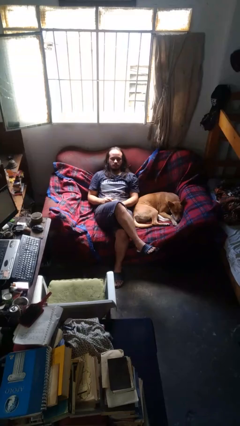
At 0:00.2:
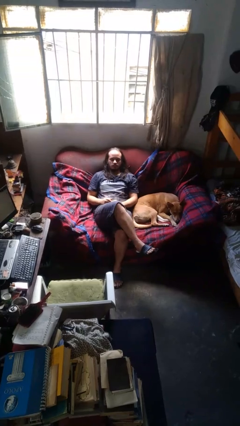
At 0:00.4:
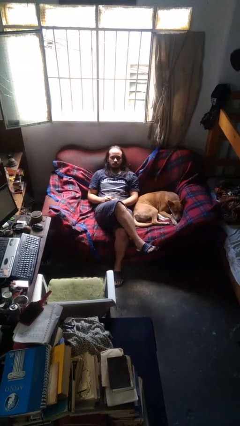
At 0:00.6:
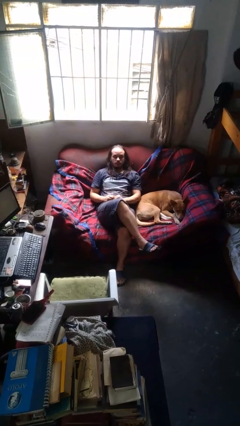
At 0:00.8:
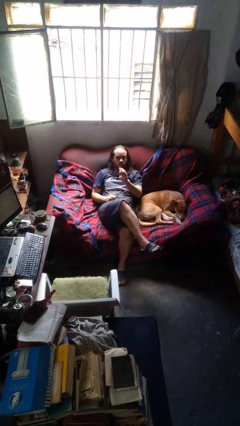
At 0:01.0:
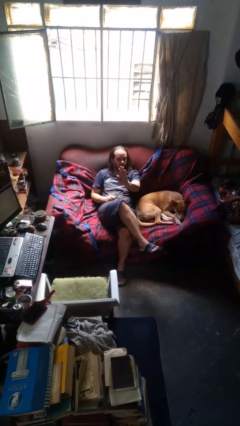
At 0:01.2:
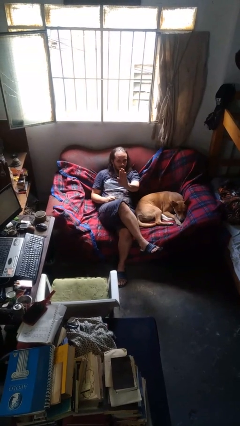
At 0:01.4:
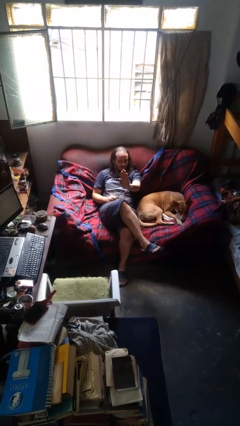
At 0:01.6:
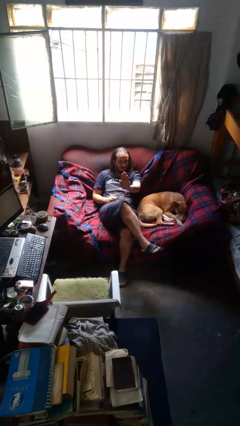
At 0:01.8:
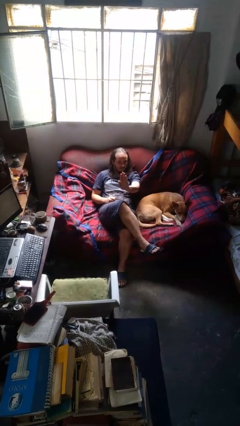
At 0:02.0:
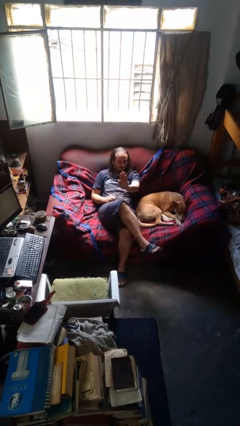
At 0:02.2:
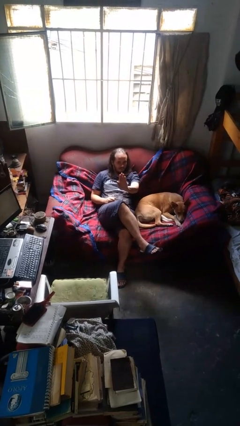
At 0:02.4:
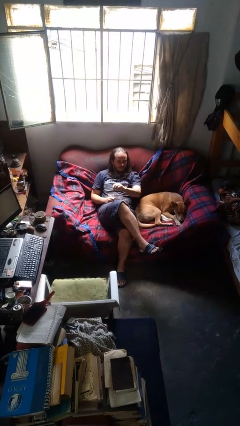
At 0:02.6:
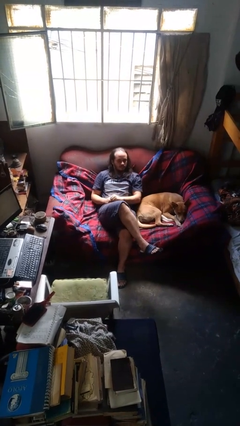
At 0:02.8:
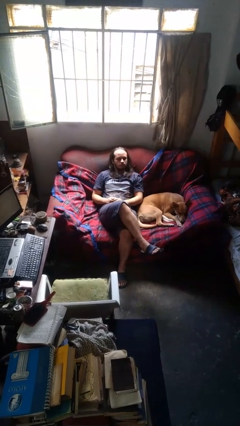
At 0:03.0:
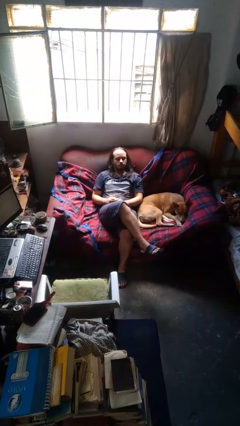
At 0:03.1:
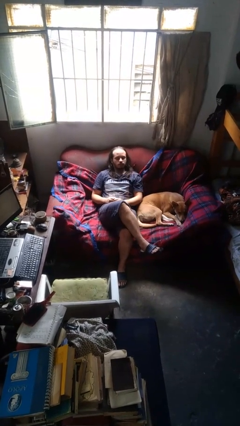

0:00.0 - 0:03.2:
person gestures stop

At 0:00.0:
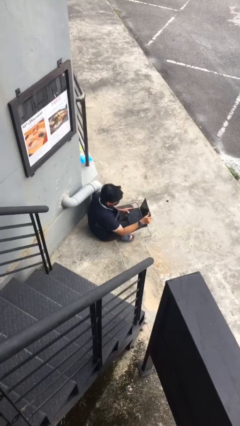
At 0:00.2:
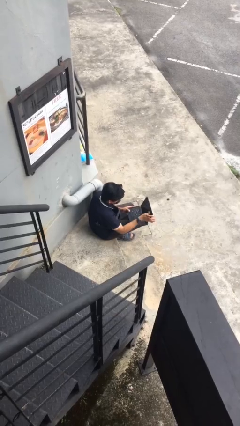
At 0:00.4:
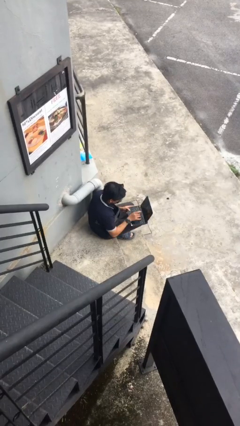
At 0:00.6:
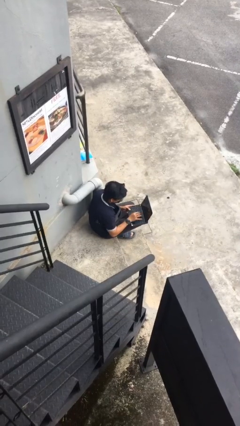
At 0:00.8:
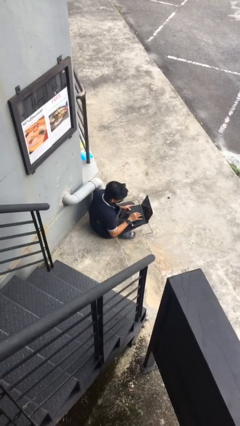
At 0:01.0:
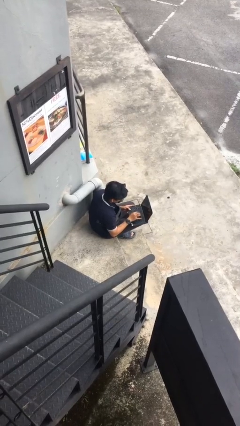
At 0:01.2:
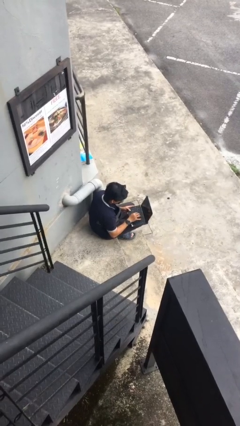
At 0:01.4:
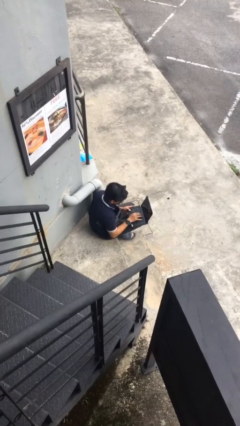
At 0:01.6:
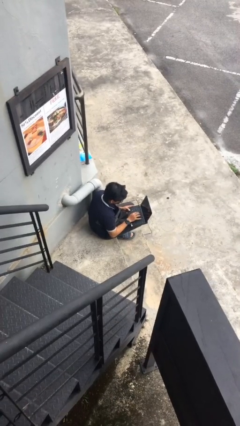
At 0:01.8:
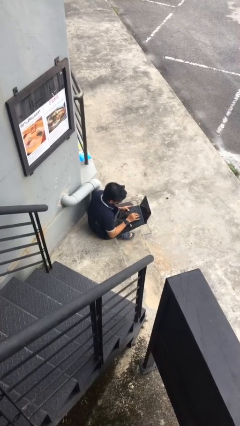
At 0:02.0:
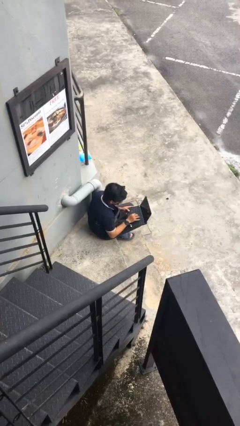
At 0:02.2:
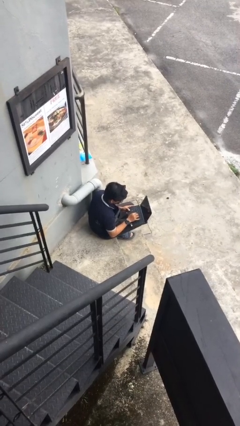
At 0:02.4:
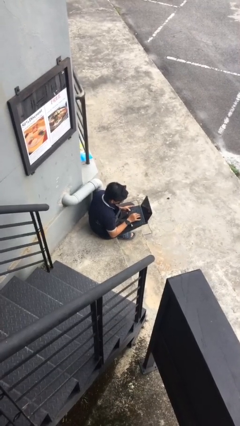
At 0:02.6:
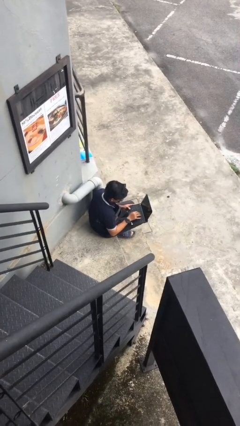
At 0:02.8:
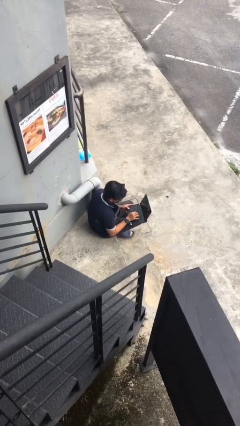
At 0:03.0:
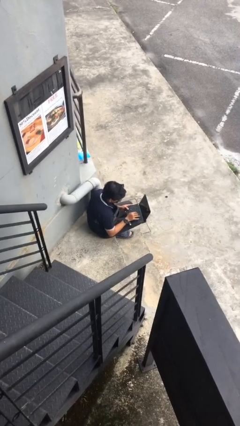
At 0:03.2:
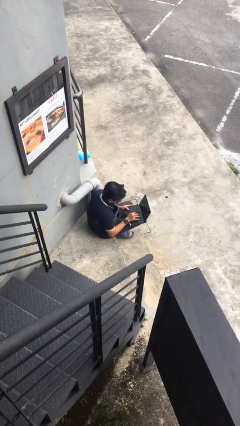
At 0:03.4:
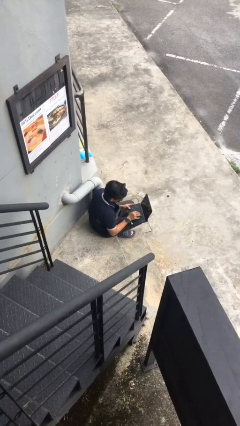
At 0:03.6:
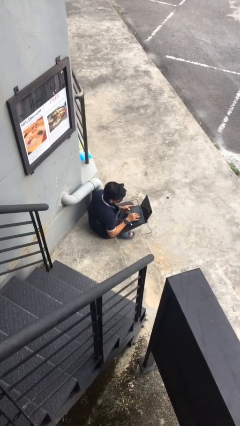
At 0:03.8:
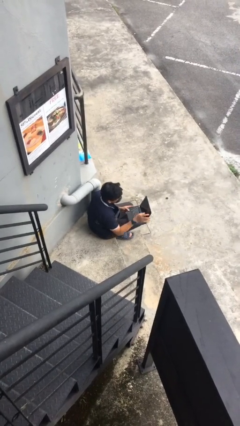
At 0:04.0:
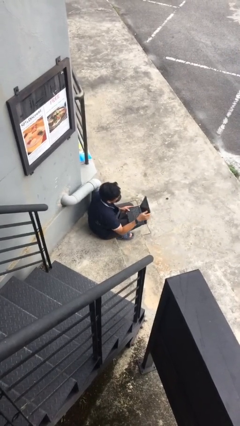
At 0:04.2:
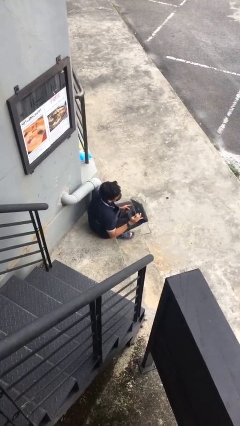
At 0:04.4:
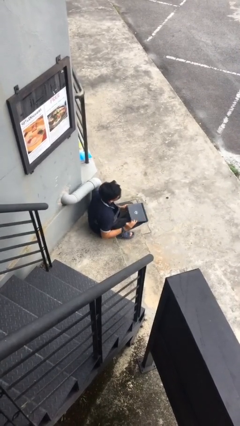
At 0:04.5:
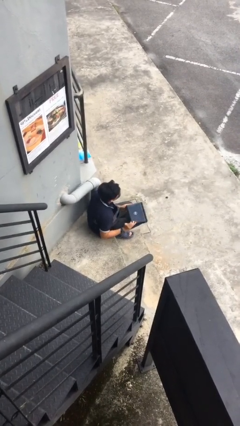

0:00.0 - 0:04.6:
person interacts with laptop

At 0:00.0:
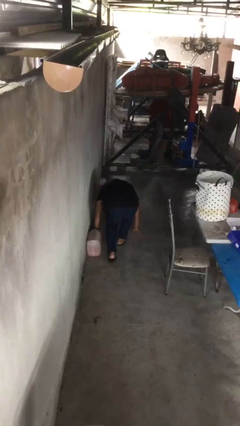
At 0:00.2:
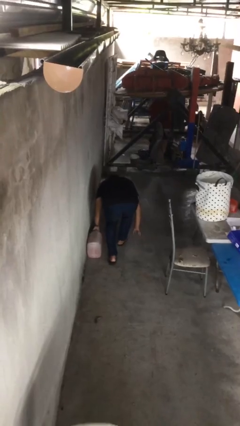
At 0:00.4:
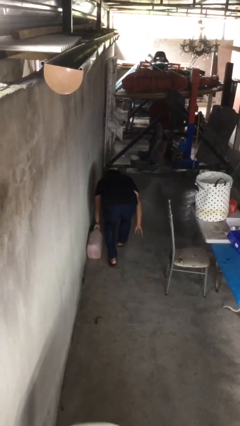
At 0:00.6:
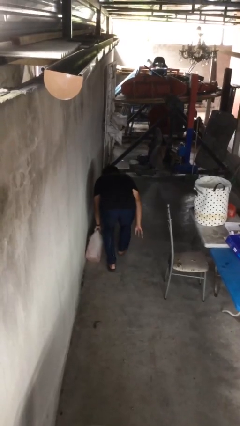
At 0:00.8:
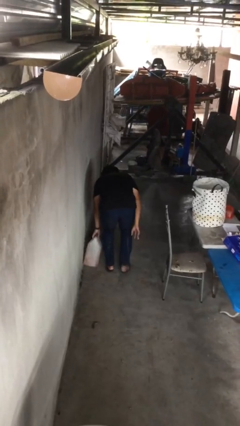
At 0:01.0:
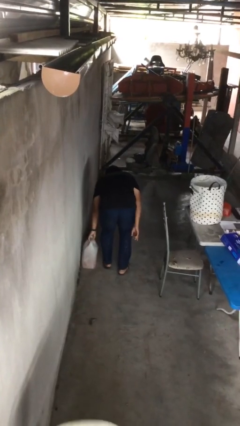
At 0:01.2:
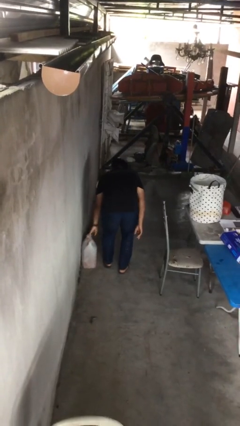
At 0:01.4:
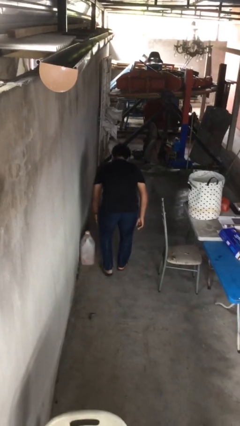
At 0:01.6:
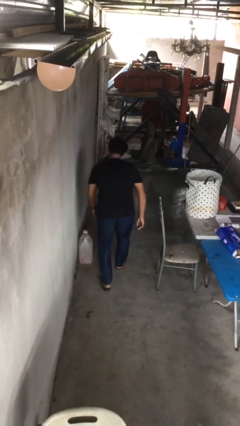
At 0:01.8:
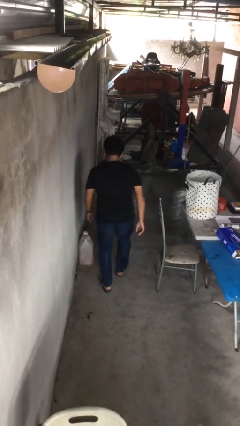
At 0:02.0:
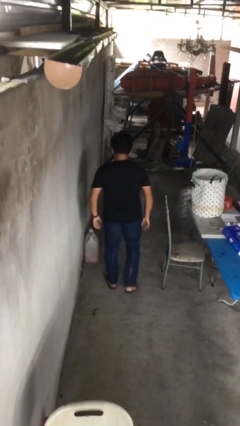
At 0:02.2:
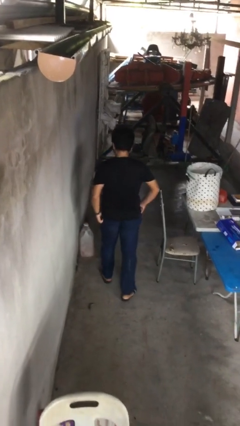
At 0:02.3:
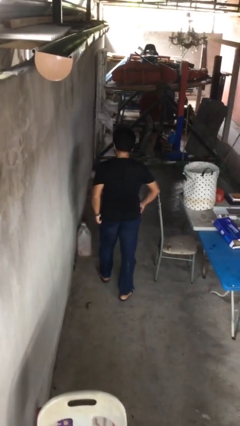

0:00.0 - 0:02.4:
person stands up from floor

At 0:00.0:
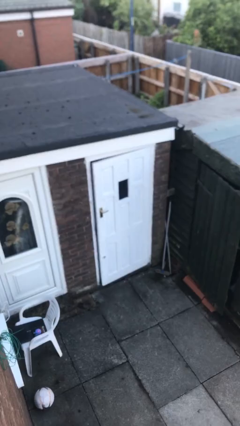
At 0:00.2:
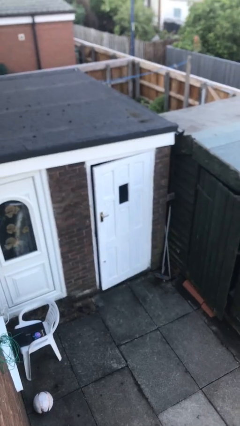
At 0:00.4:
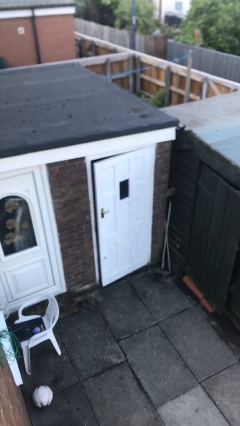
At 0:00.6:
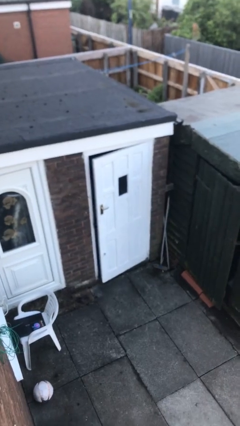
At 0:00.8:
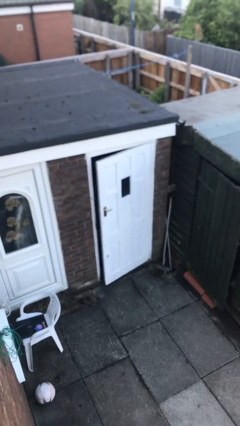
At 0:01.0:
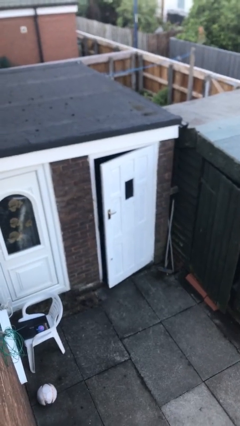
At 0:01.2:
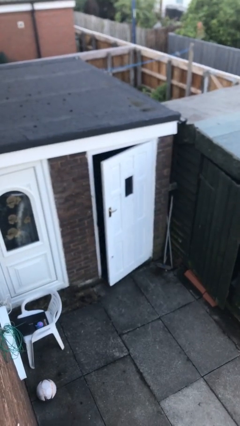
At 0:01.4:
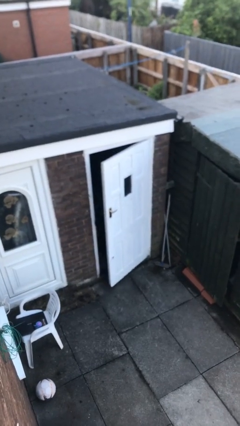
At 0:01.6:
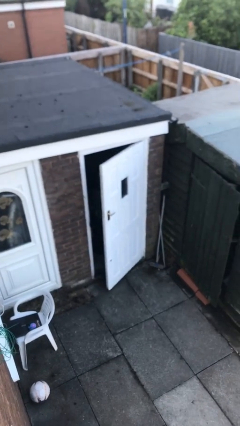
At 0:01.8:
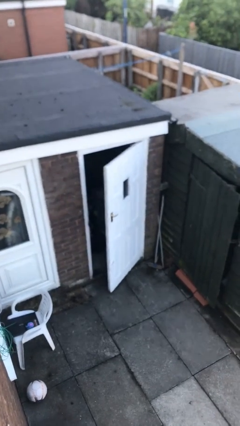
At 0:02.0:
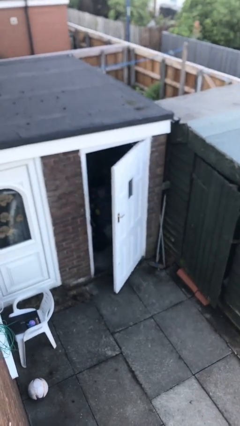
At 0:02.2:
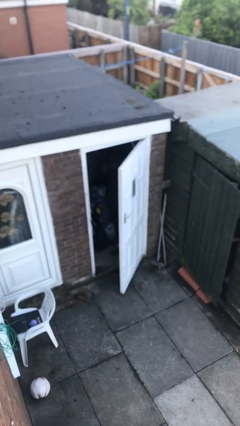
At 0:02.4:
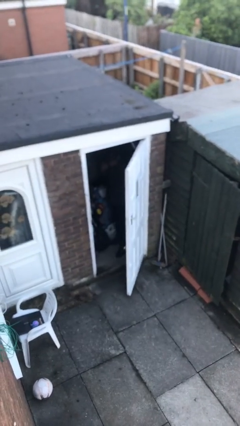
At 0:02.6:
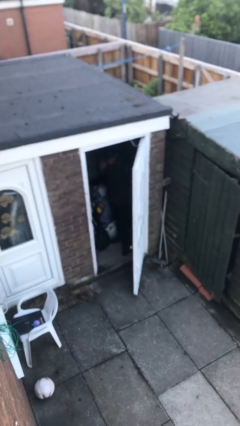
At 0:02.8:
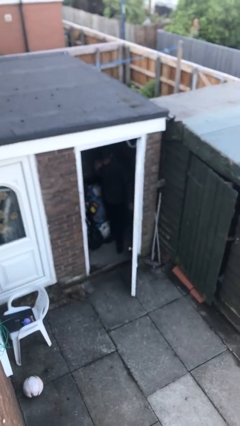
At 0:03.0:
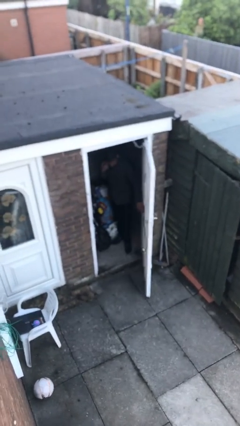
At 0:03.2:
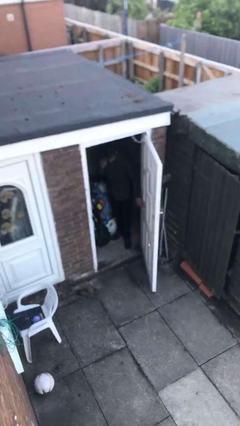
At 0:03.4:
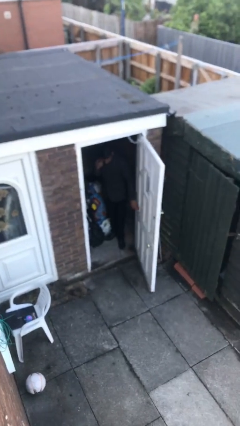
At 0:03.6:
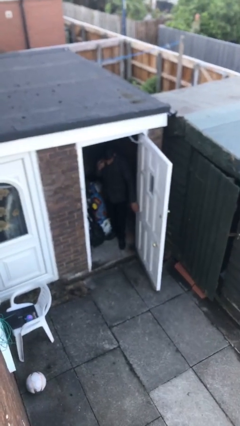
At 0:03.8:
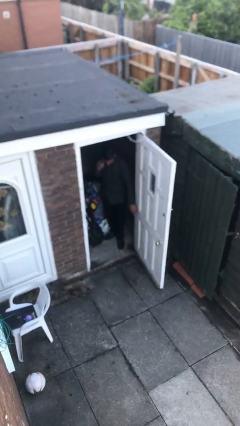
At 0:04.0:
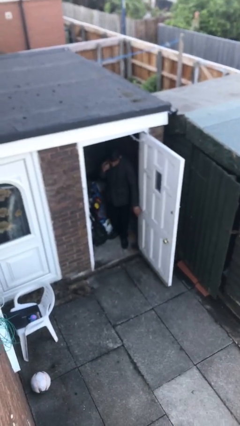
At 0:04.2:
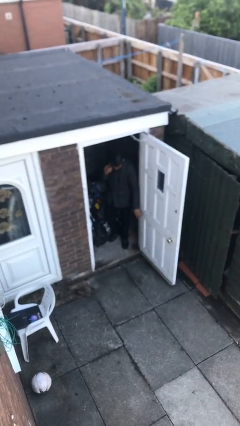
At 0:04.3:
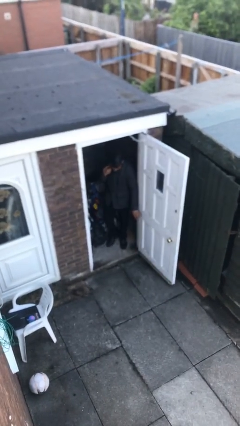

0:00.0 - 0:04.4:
person opens facility door

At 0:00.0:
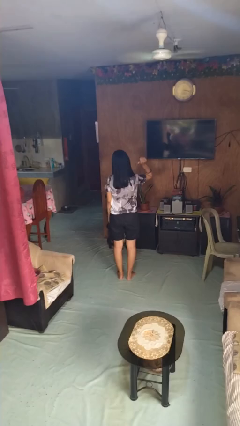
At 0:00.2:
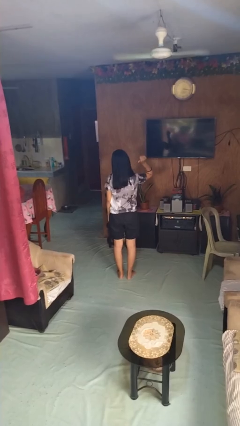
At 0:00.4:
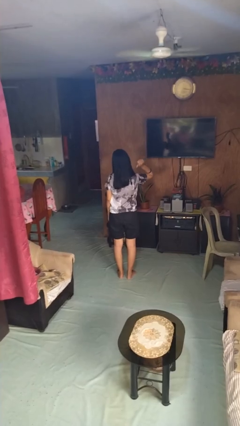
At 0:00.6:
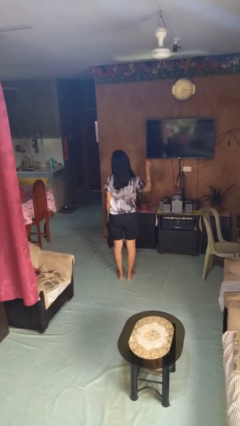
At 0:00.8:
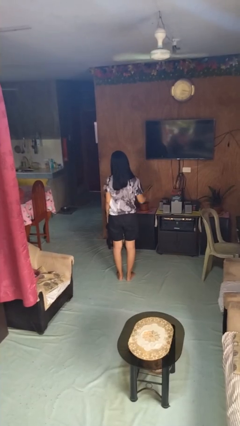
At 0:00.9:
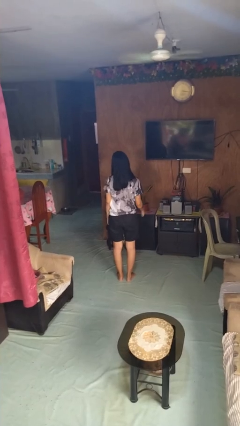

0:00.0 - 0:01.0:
person gestures behind me

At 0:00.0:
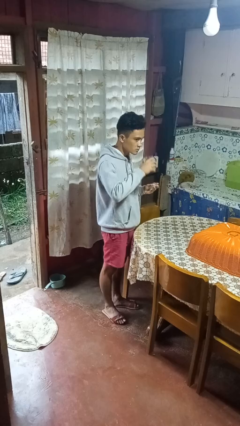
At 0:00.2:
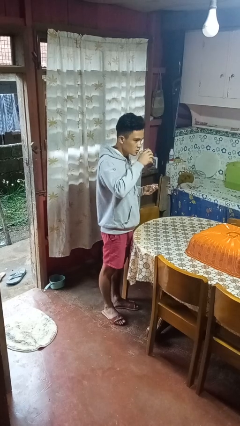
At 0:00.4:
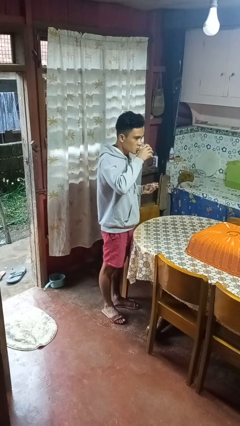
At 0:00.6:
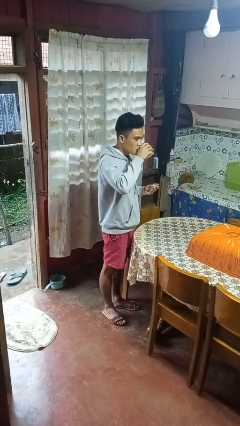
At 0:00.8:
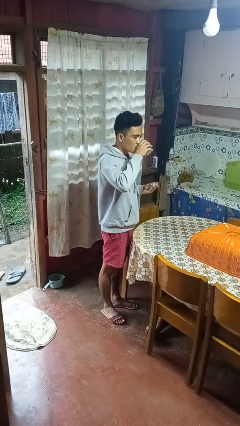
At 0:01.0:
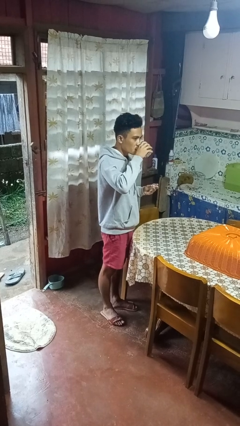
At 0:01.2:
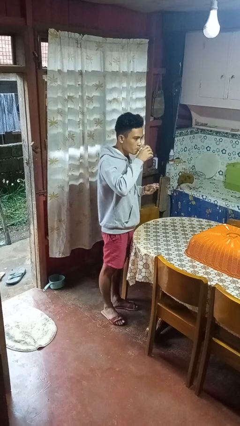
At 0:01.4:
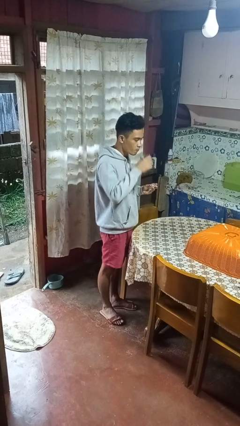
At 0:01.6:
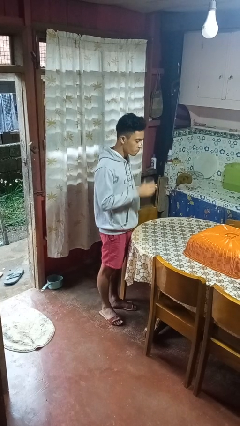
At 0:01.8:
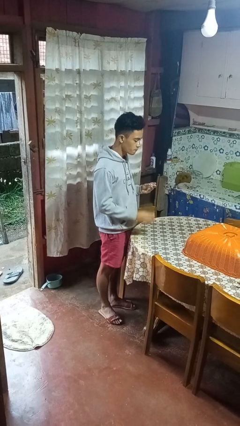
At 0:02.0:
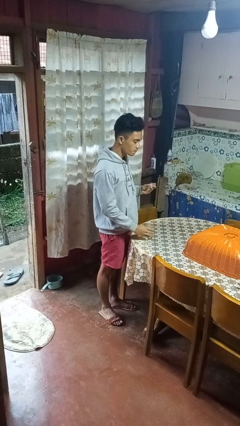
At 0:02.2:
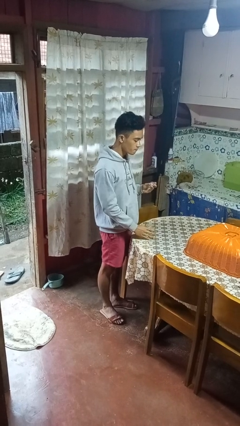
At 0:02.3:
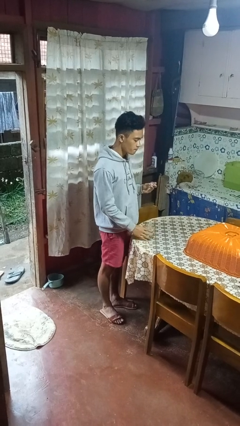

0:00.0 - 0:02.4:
person drinks from cup
